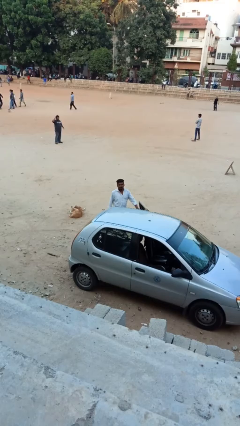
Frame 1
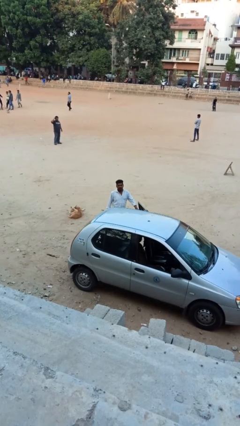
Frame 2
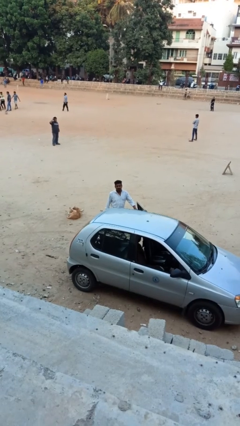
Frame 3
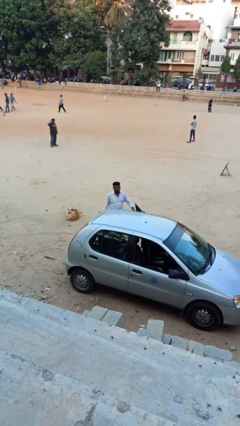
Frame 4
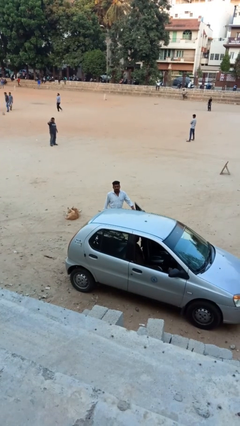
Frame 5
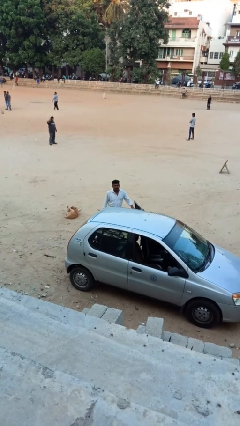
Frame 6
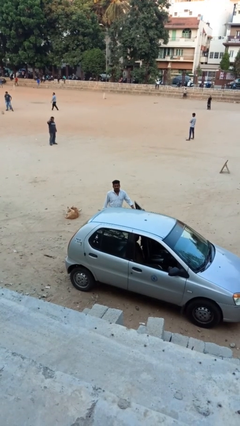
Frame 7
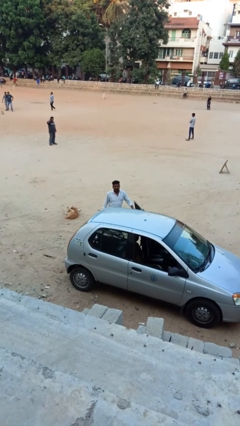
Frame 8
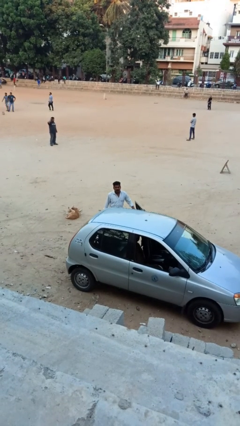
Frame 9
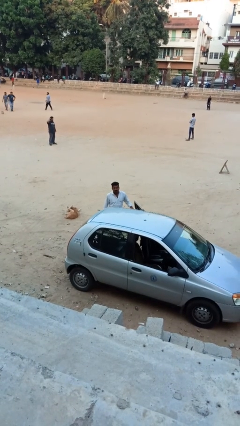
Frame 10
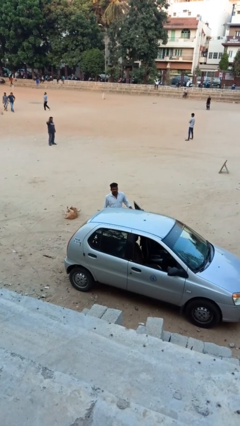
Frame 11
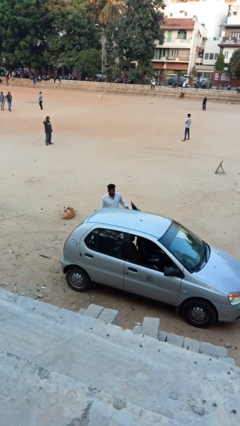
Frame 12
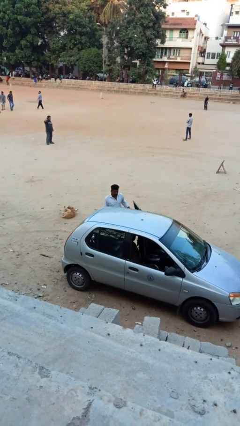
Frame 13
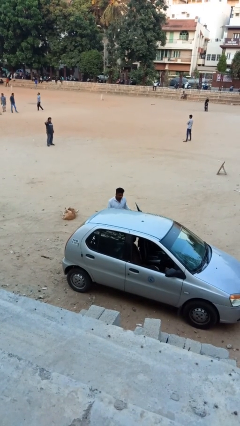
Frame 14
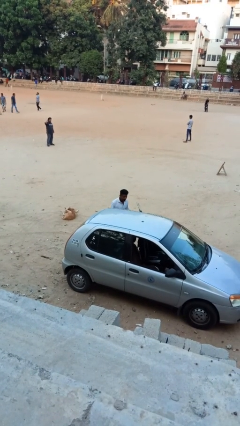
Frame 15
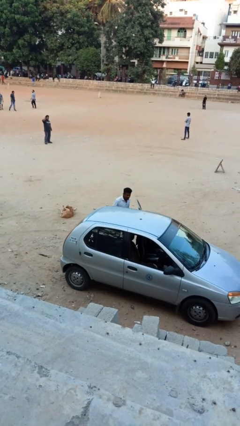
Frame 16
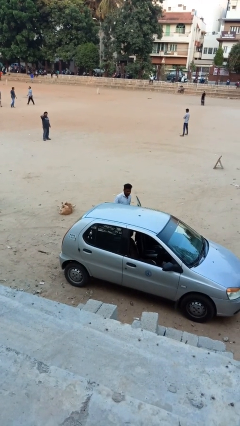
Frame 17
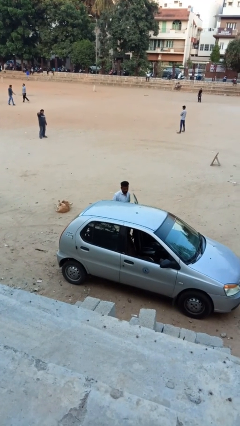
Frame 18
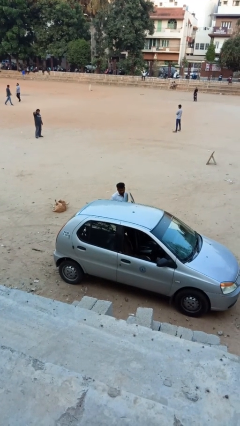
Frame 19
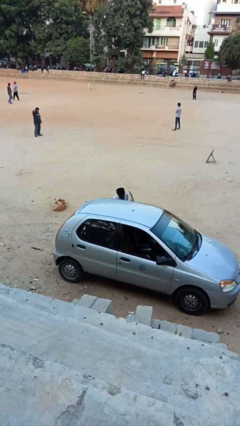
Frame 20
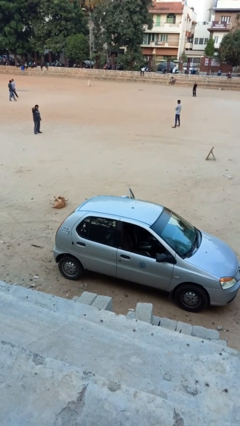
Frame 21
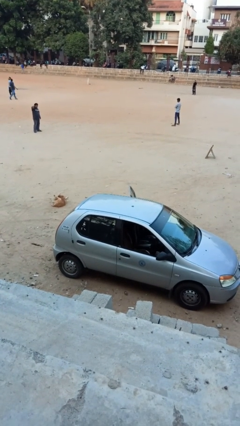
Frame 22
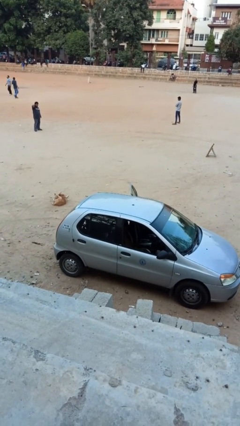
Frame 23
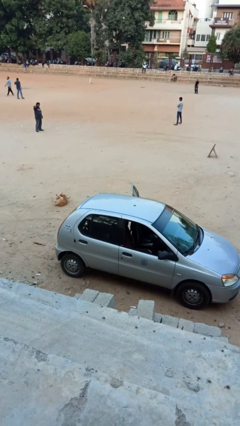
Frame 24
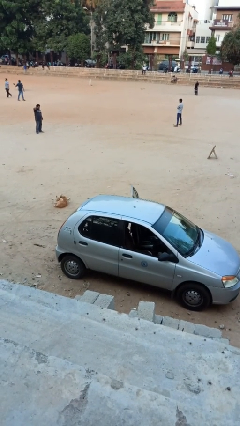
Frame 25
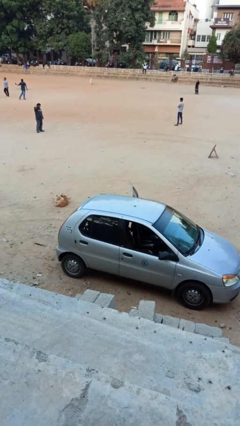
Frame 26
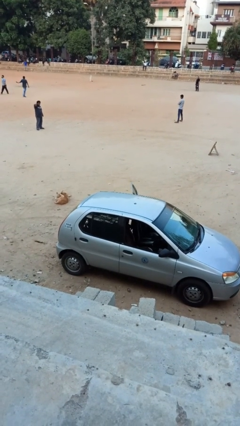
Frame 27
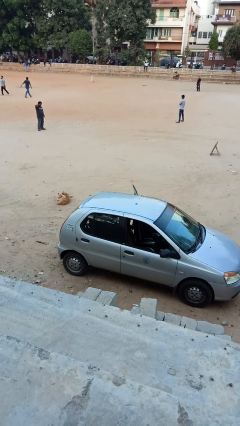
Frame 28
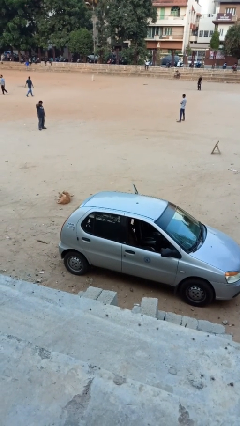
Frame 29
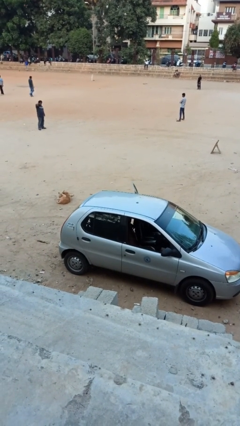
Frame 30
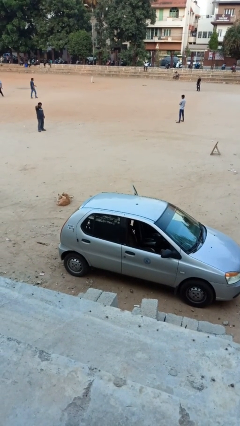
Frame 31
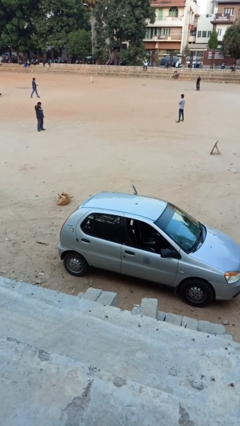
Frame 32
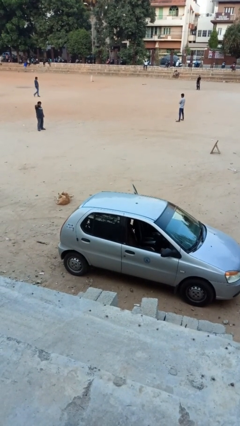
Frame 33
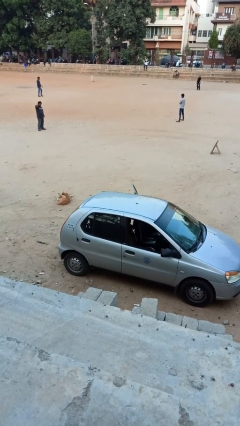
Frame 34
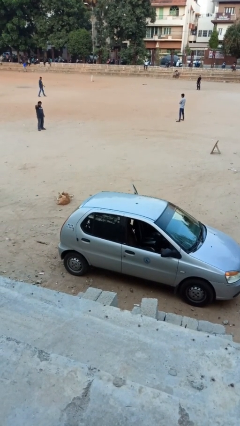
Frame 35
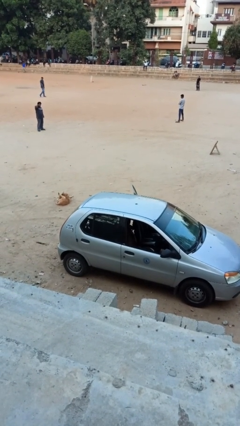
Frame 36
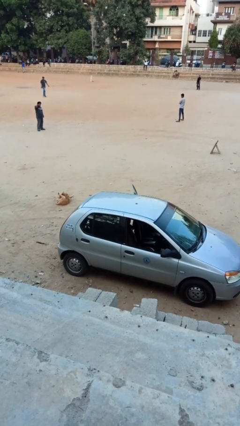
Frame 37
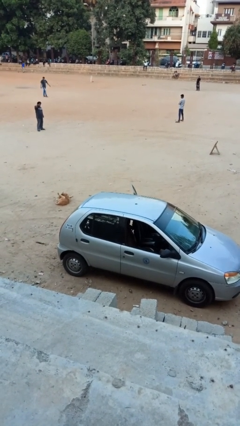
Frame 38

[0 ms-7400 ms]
person enters car

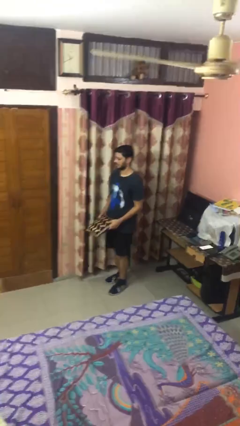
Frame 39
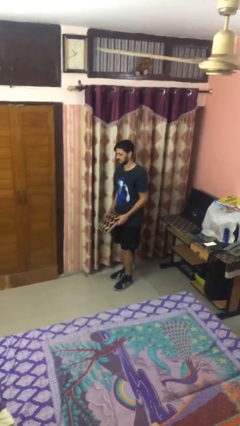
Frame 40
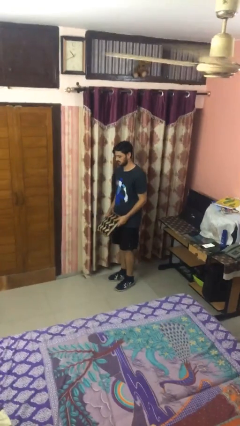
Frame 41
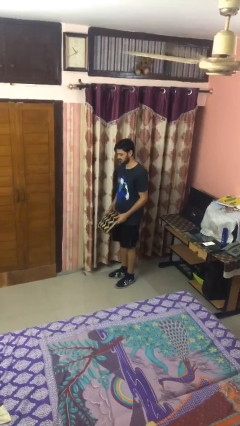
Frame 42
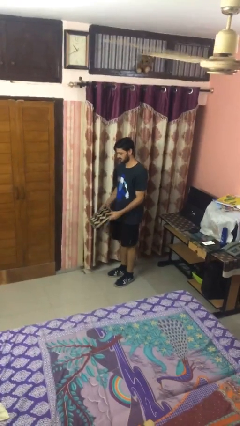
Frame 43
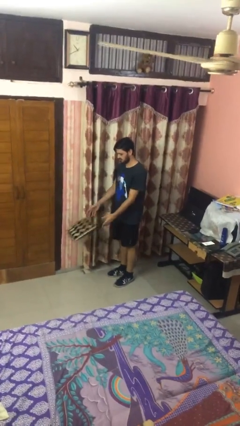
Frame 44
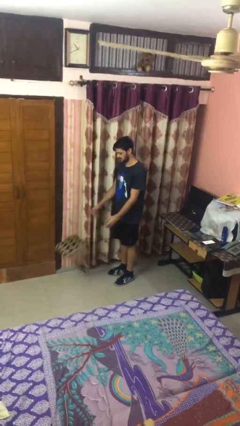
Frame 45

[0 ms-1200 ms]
person throws object to ground

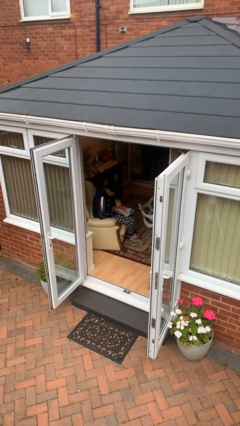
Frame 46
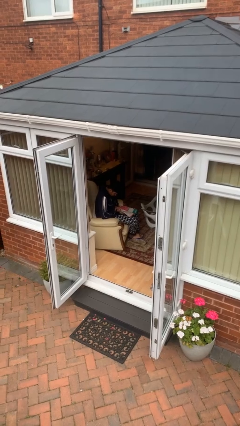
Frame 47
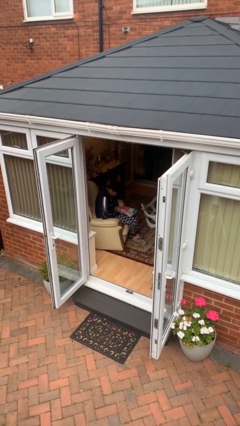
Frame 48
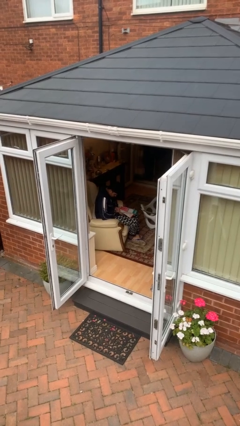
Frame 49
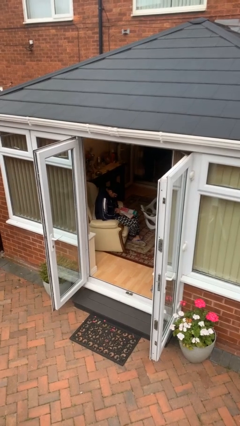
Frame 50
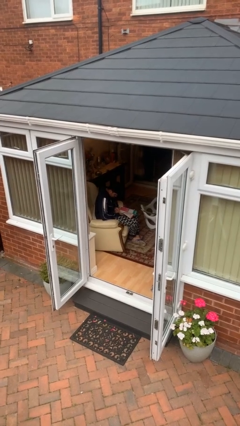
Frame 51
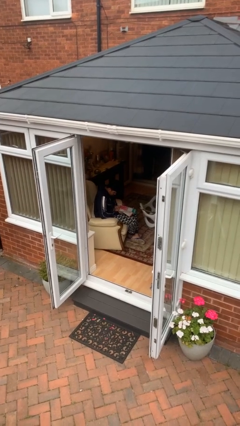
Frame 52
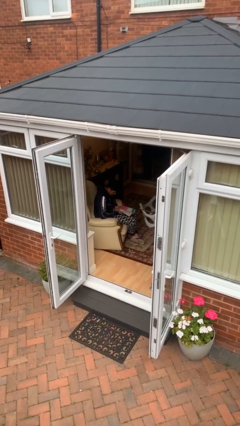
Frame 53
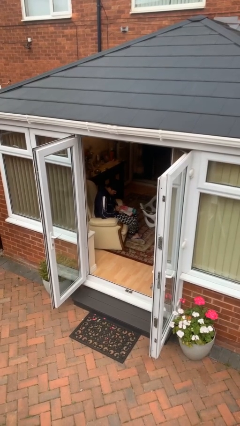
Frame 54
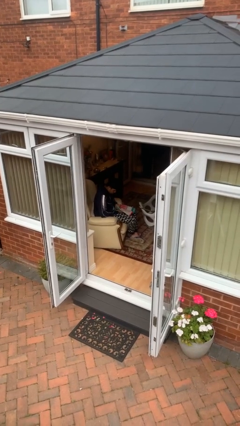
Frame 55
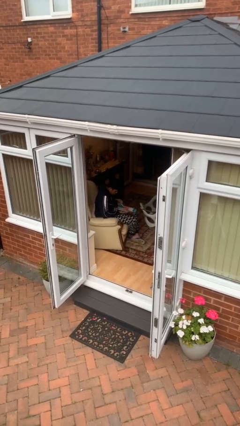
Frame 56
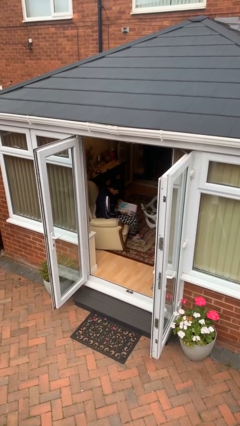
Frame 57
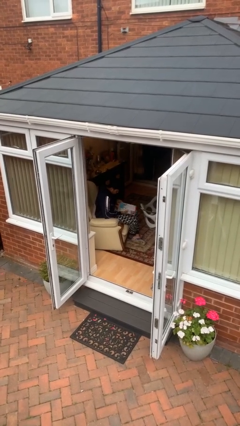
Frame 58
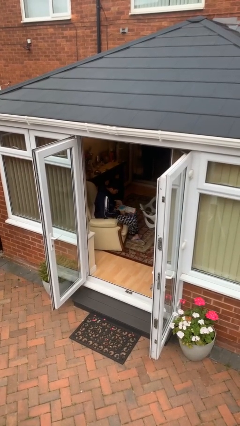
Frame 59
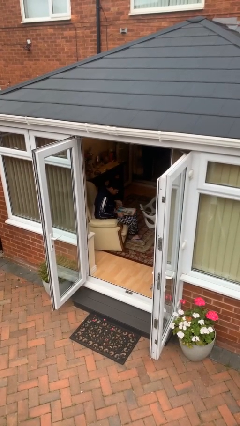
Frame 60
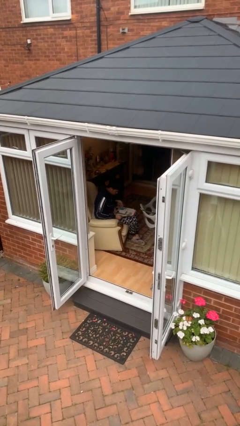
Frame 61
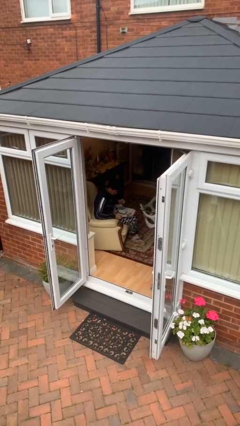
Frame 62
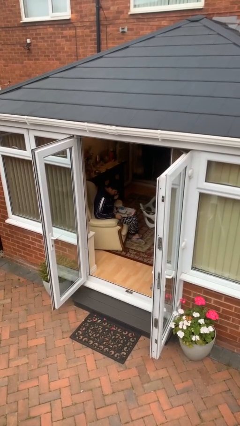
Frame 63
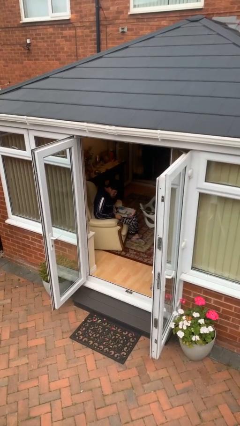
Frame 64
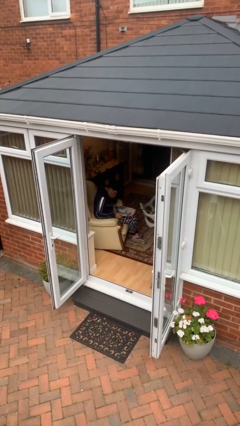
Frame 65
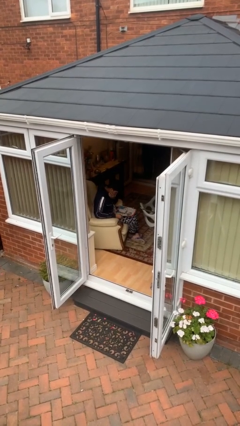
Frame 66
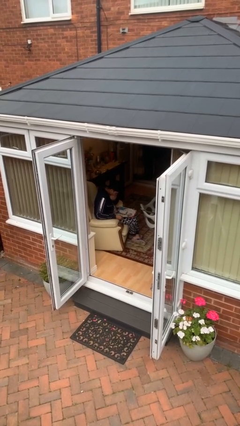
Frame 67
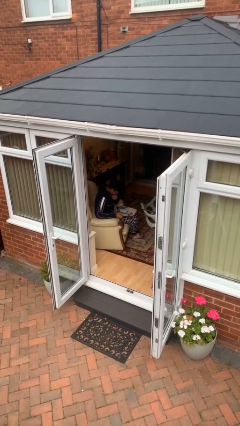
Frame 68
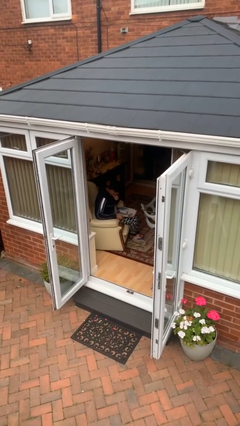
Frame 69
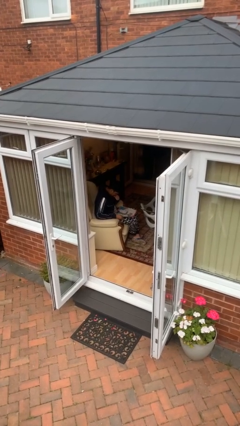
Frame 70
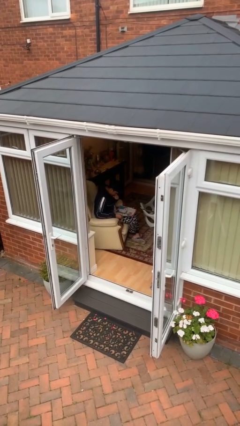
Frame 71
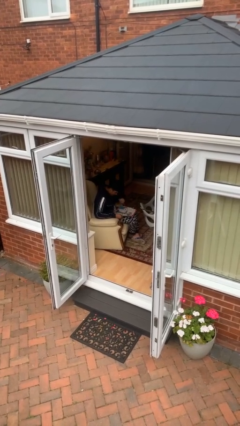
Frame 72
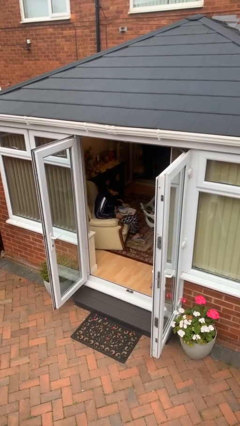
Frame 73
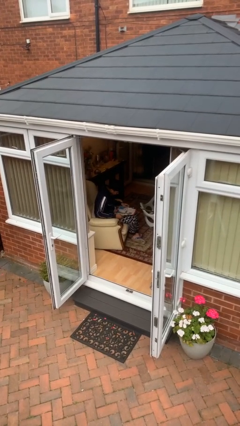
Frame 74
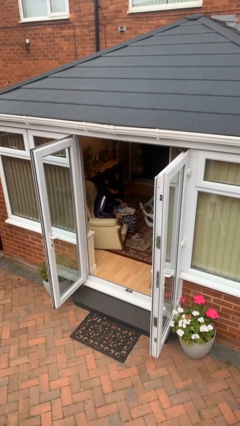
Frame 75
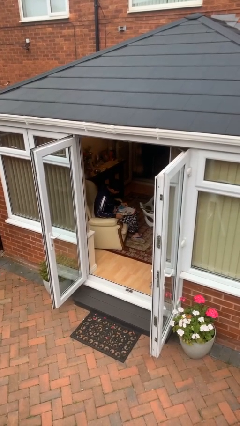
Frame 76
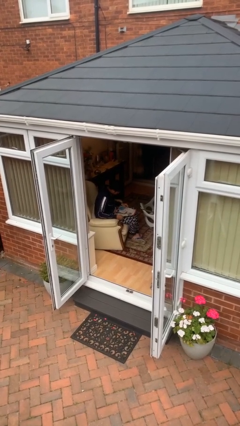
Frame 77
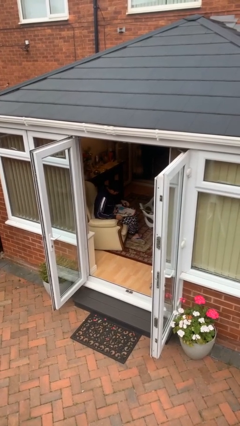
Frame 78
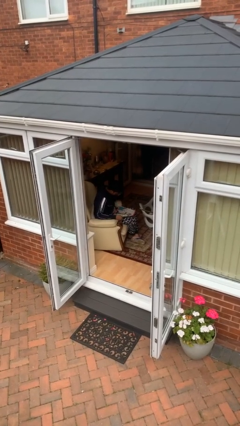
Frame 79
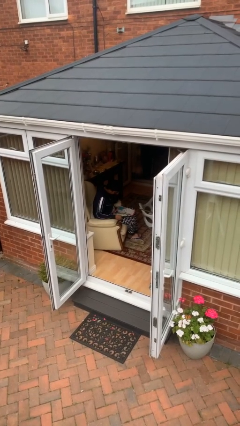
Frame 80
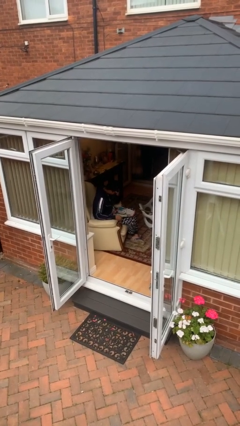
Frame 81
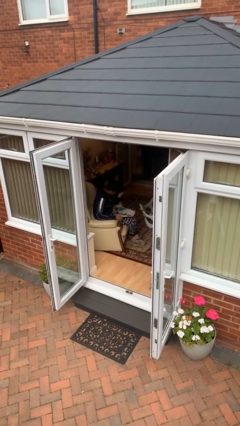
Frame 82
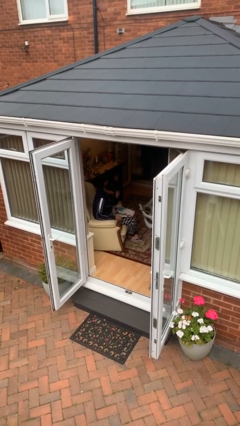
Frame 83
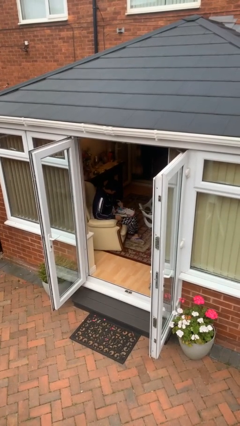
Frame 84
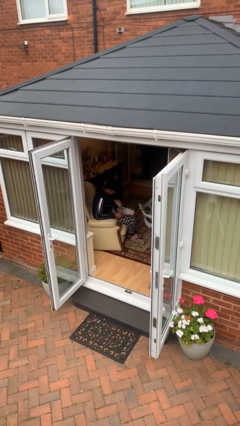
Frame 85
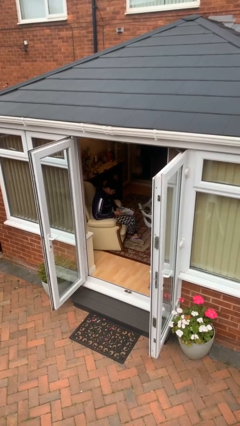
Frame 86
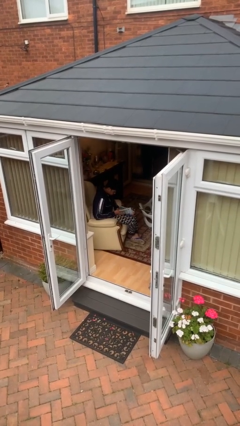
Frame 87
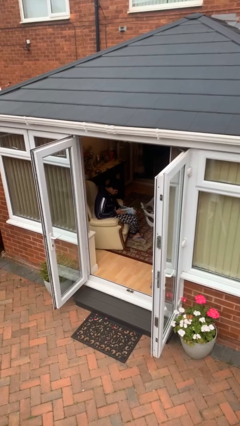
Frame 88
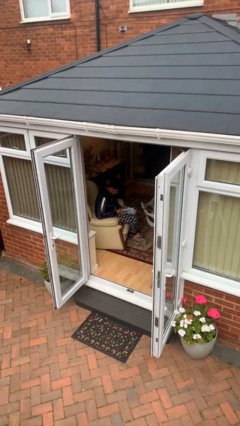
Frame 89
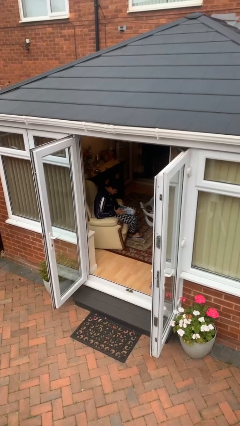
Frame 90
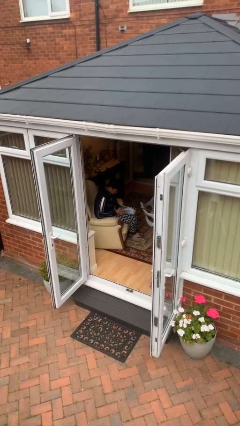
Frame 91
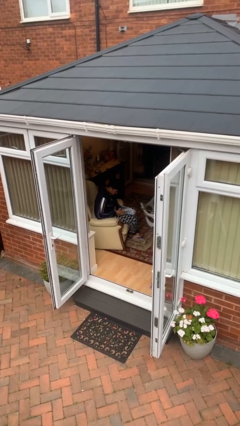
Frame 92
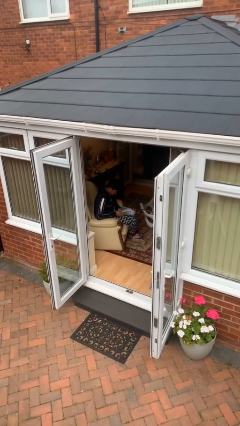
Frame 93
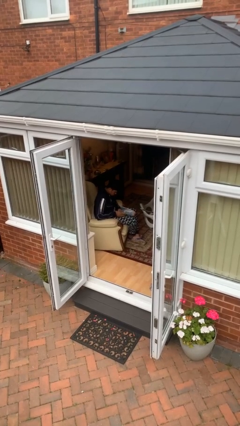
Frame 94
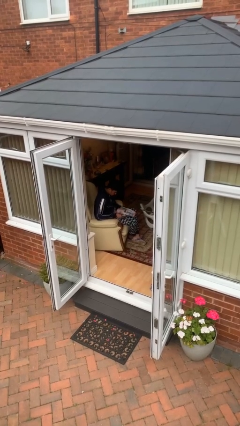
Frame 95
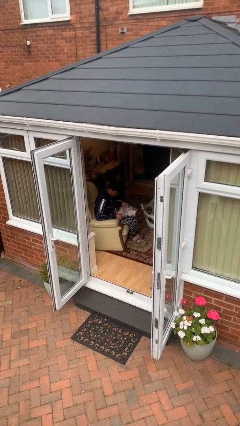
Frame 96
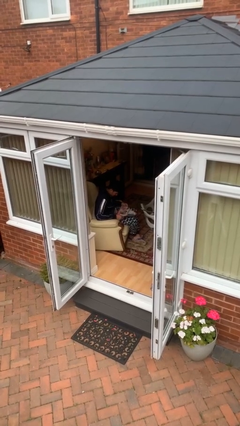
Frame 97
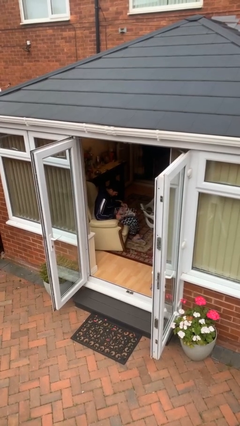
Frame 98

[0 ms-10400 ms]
person reads document
